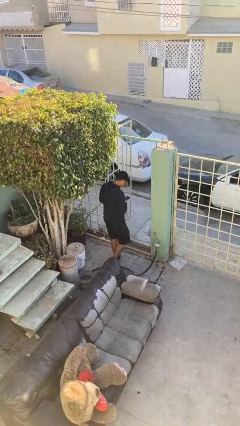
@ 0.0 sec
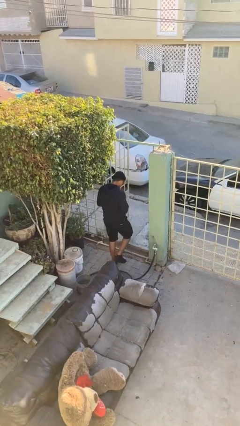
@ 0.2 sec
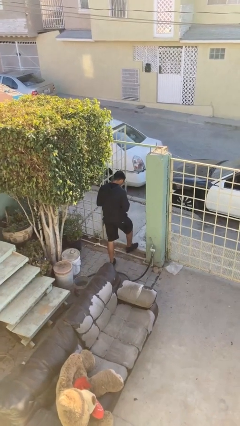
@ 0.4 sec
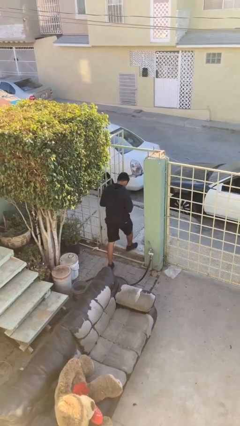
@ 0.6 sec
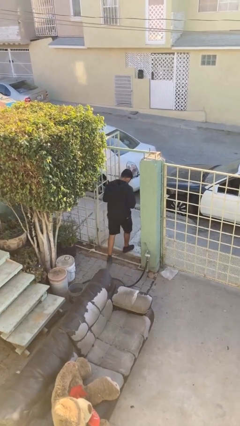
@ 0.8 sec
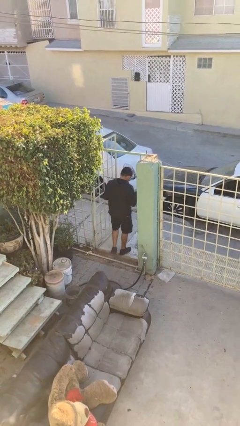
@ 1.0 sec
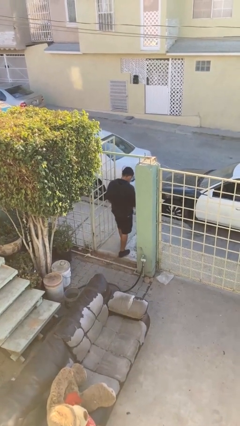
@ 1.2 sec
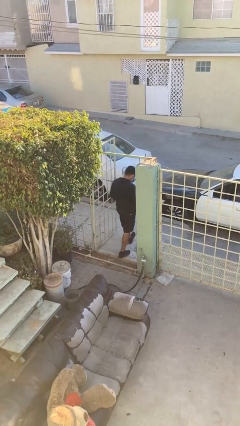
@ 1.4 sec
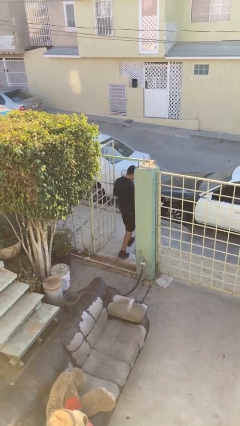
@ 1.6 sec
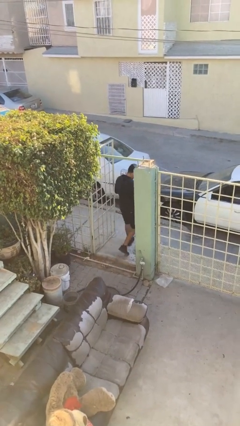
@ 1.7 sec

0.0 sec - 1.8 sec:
person exits scene through structure

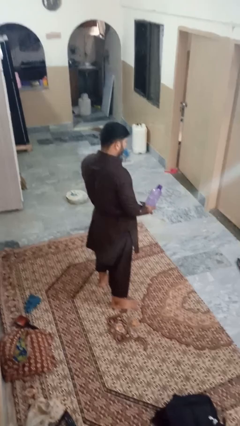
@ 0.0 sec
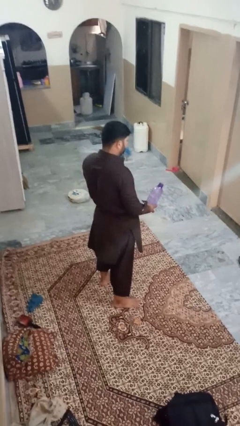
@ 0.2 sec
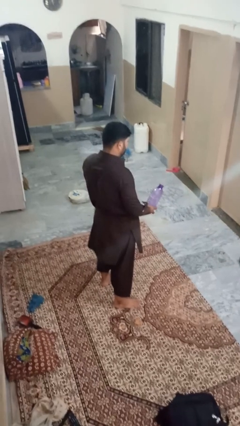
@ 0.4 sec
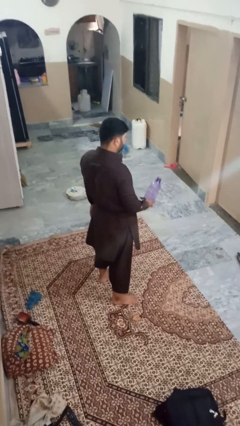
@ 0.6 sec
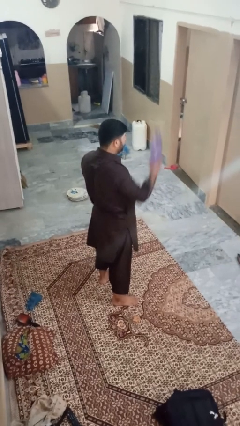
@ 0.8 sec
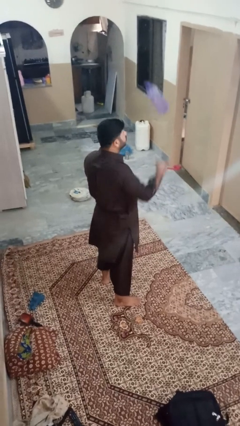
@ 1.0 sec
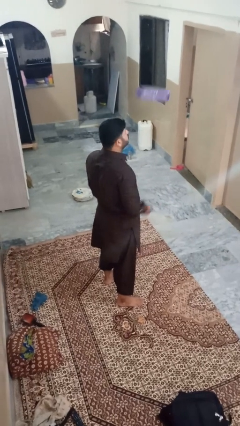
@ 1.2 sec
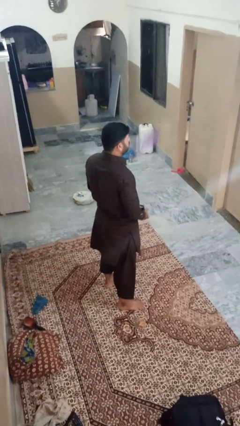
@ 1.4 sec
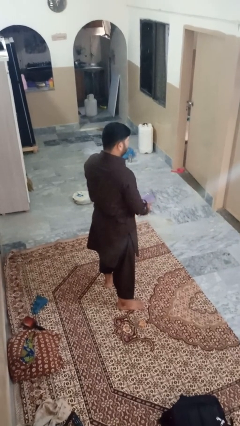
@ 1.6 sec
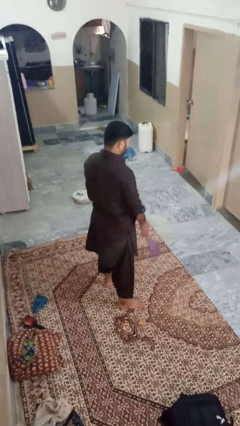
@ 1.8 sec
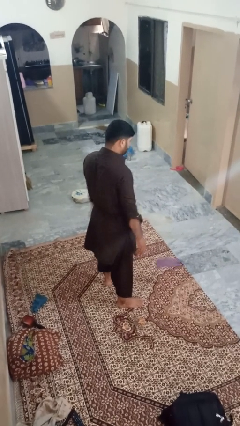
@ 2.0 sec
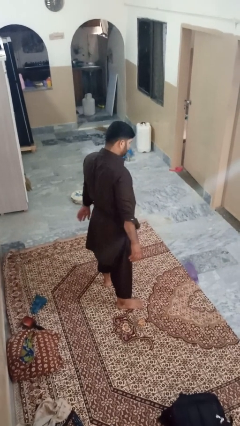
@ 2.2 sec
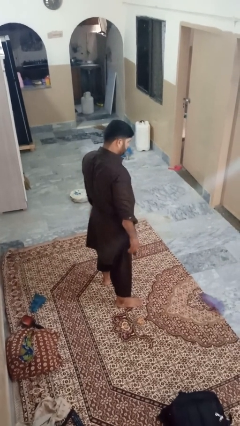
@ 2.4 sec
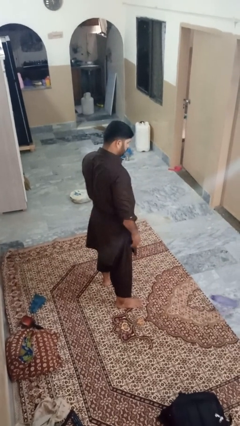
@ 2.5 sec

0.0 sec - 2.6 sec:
person throws object into air

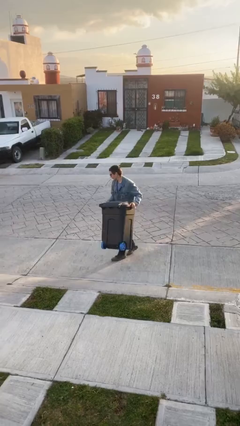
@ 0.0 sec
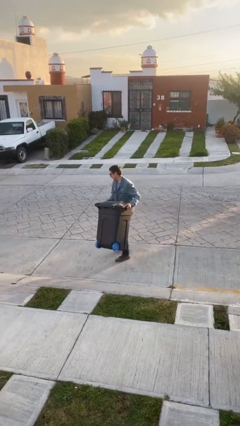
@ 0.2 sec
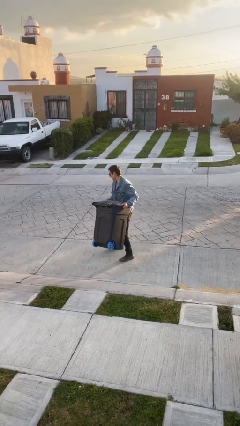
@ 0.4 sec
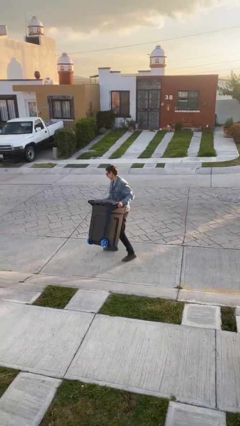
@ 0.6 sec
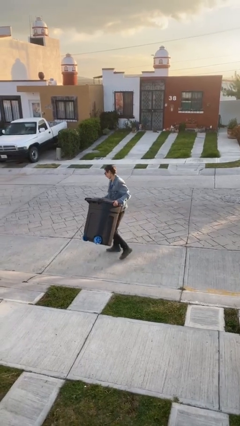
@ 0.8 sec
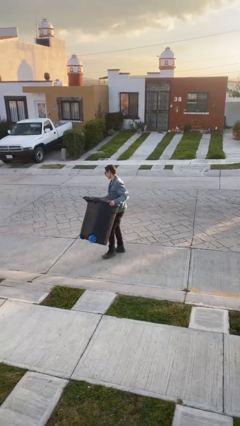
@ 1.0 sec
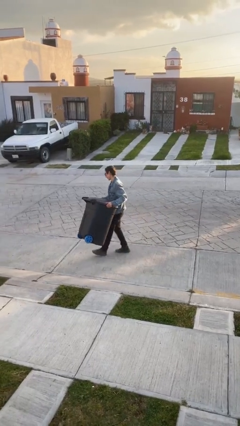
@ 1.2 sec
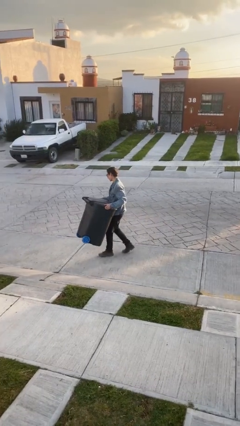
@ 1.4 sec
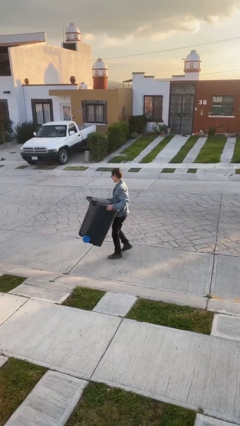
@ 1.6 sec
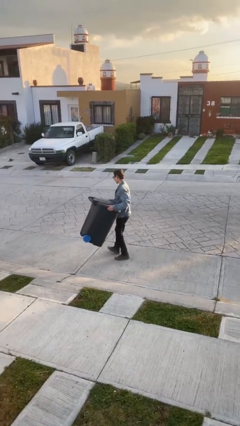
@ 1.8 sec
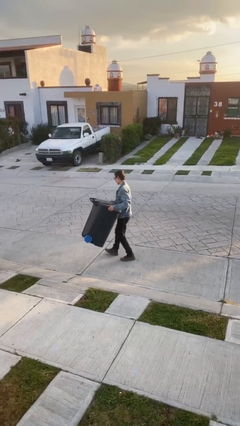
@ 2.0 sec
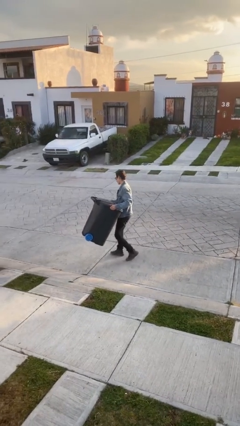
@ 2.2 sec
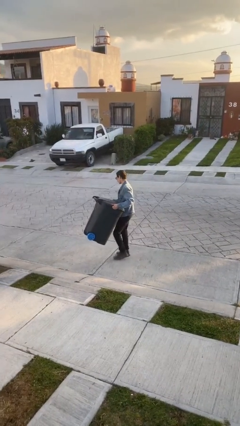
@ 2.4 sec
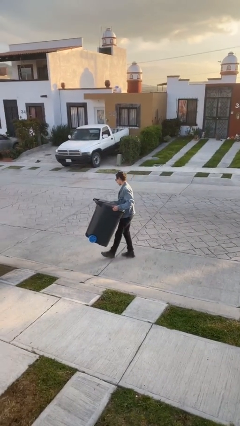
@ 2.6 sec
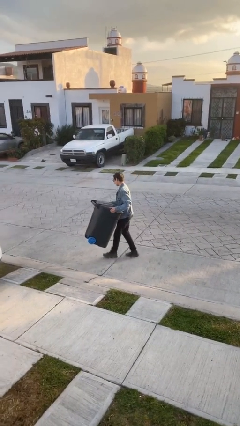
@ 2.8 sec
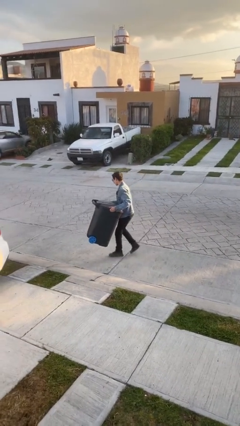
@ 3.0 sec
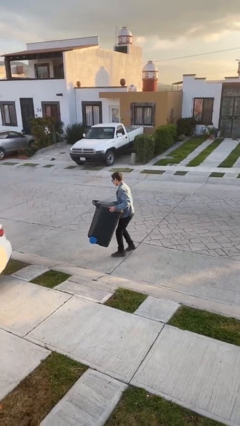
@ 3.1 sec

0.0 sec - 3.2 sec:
person carries heavy object

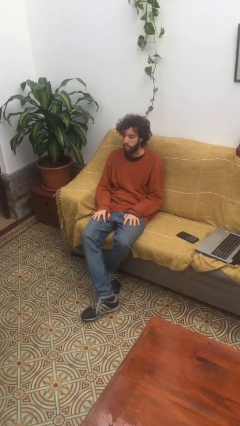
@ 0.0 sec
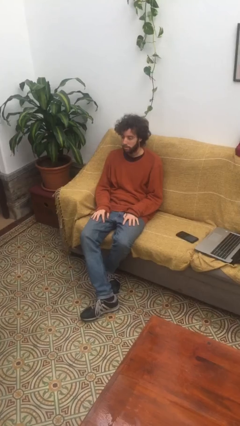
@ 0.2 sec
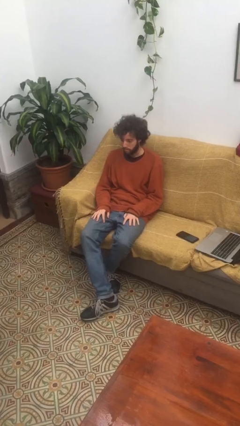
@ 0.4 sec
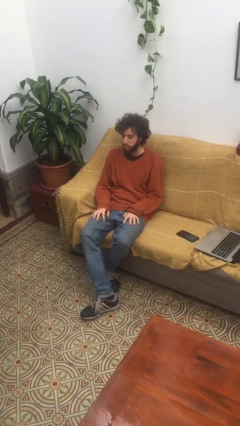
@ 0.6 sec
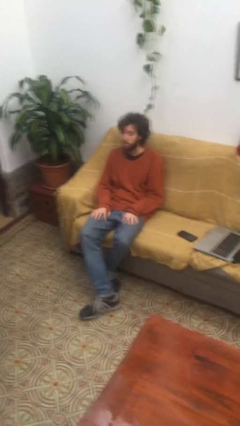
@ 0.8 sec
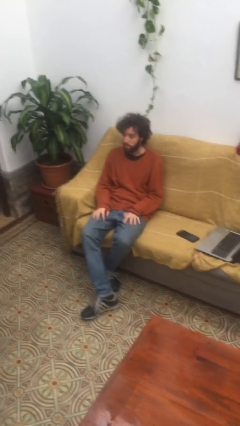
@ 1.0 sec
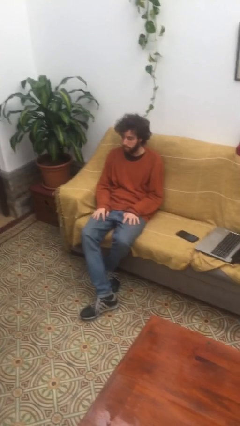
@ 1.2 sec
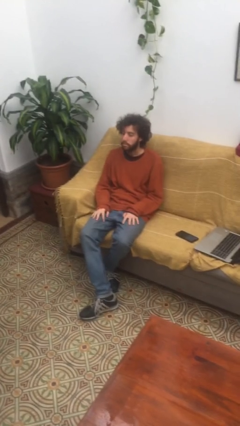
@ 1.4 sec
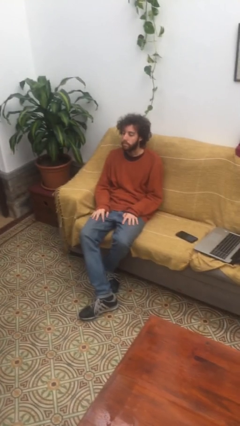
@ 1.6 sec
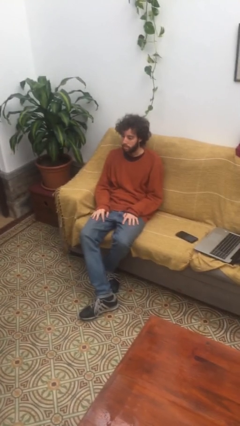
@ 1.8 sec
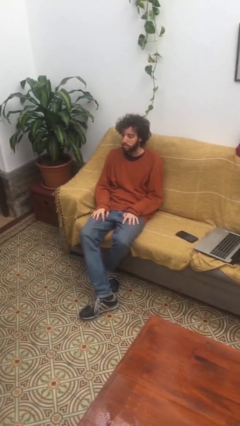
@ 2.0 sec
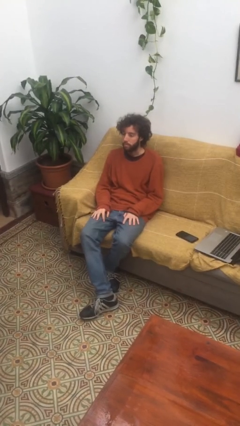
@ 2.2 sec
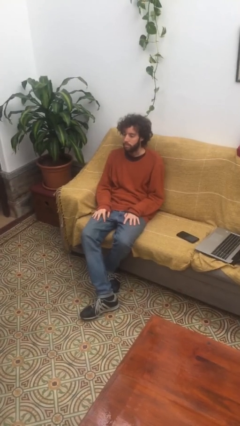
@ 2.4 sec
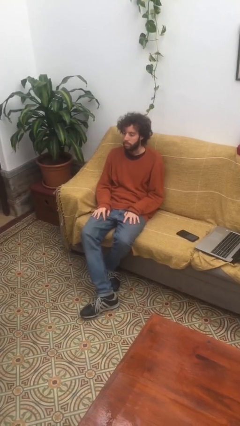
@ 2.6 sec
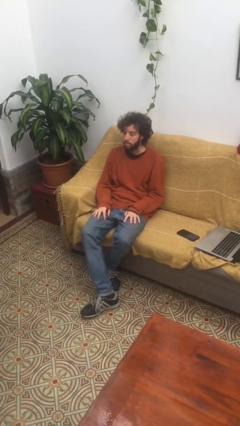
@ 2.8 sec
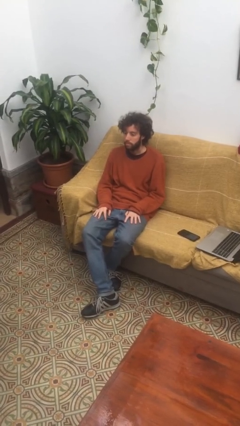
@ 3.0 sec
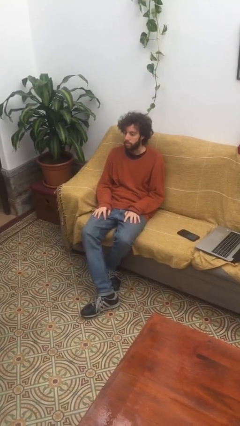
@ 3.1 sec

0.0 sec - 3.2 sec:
person nods head

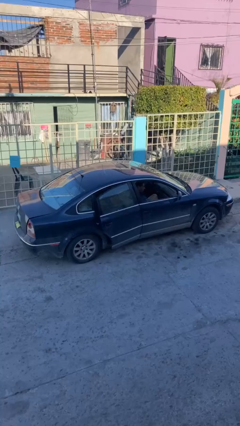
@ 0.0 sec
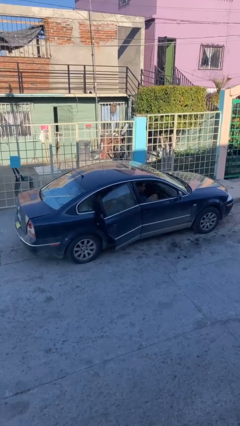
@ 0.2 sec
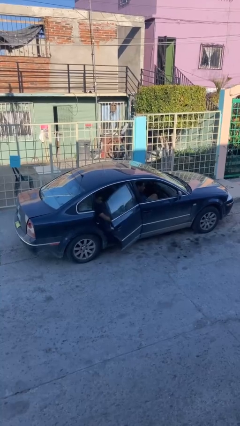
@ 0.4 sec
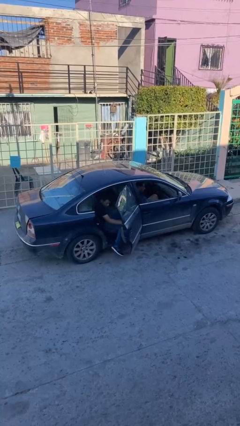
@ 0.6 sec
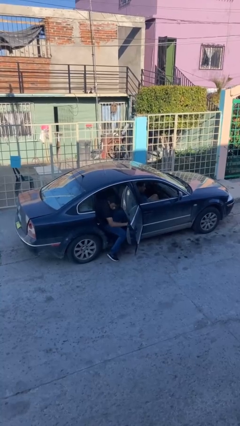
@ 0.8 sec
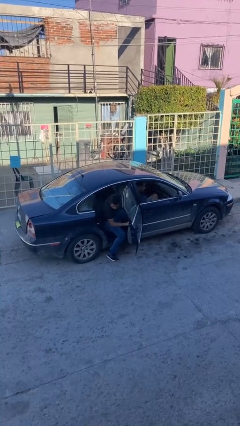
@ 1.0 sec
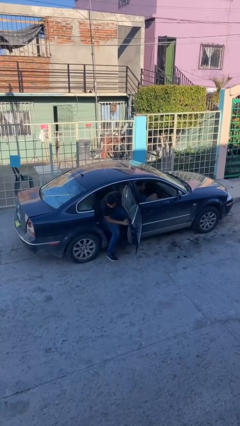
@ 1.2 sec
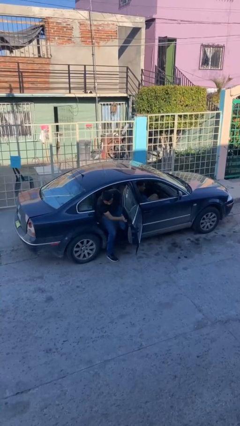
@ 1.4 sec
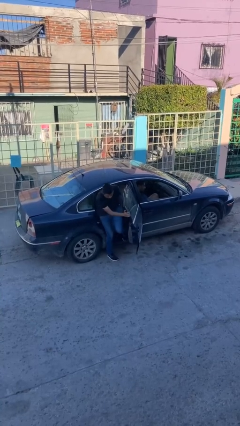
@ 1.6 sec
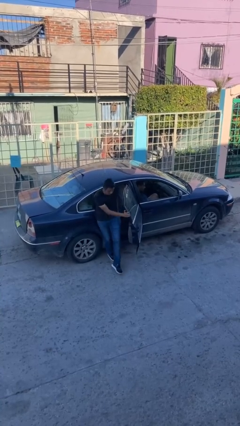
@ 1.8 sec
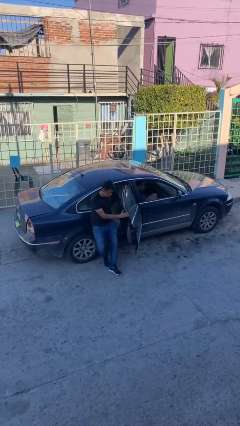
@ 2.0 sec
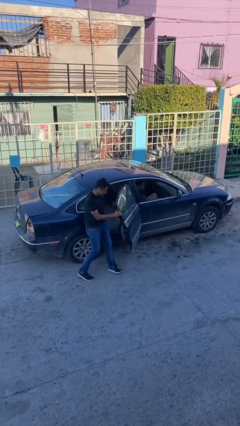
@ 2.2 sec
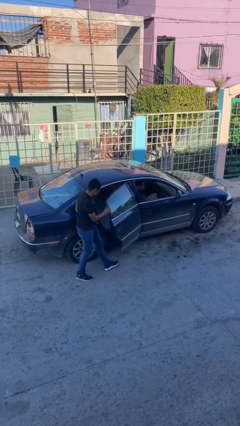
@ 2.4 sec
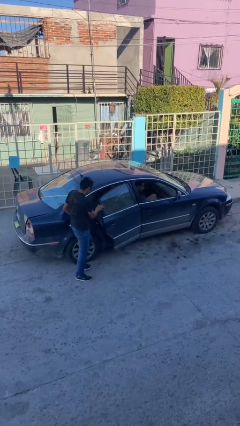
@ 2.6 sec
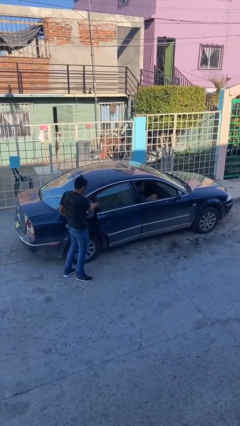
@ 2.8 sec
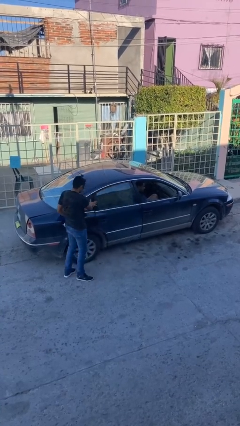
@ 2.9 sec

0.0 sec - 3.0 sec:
car drops off person

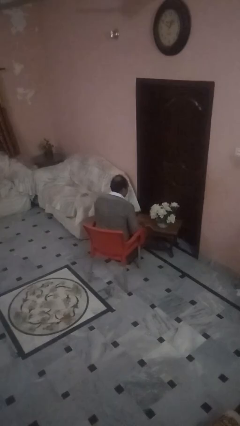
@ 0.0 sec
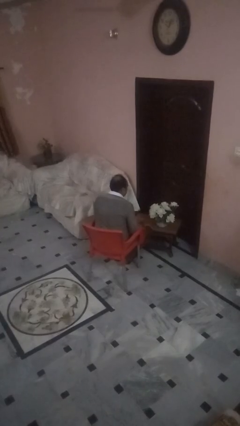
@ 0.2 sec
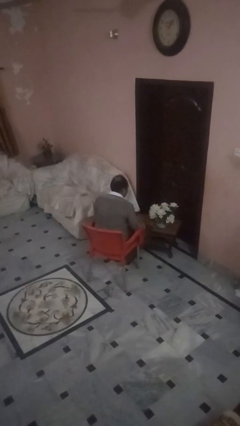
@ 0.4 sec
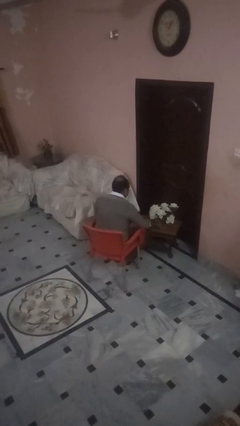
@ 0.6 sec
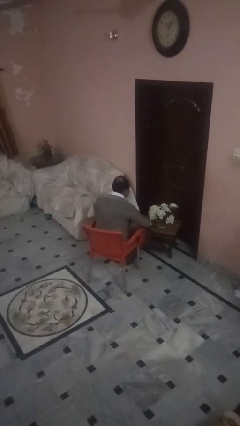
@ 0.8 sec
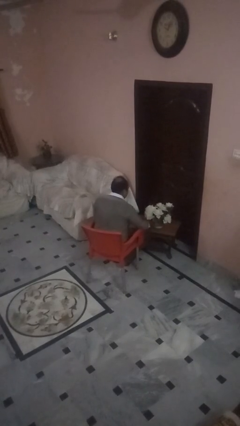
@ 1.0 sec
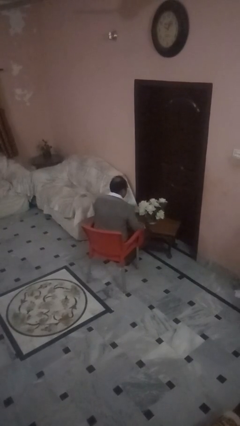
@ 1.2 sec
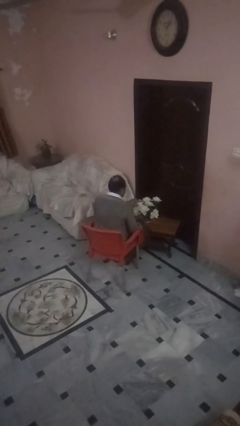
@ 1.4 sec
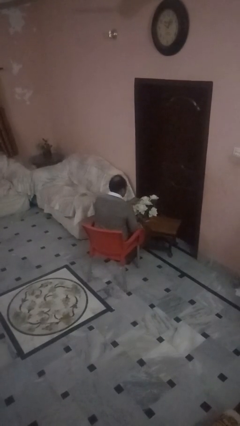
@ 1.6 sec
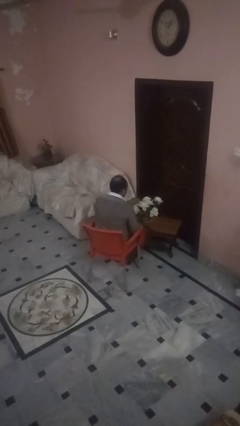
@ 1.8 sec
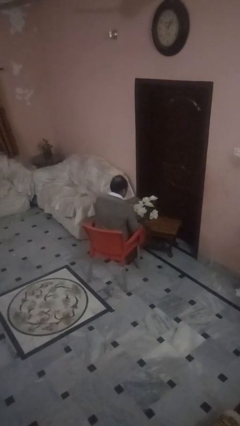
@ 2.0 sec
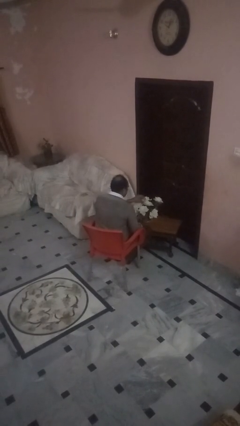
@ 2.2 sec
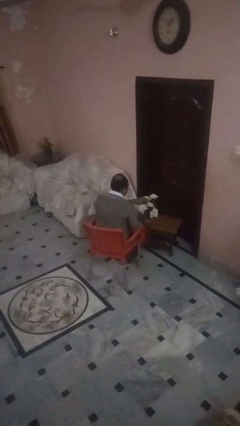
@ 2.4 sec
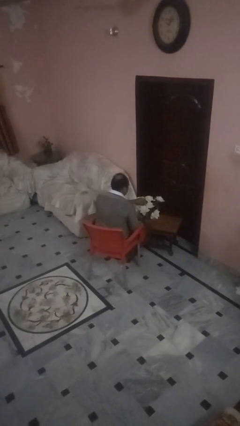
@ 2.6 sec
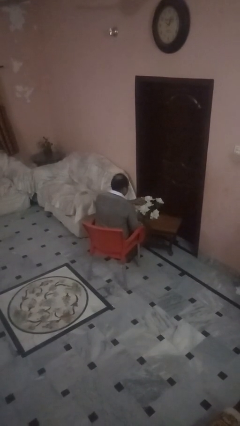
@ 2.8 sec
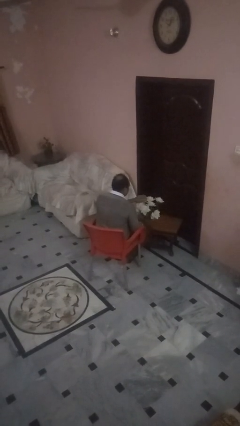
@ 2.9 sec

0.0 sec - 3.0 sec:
person arranges flowers in vase

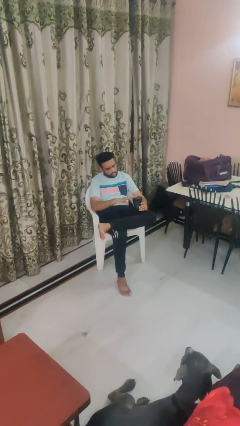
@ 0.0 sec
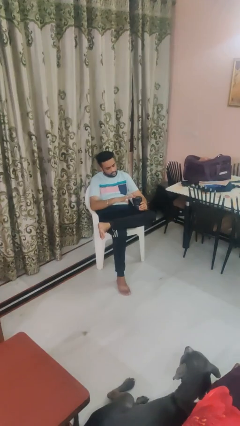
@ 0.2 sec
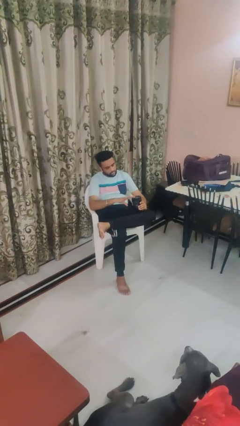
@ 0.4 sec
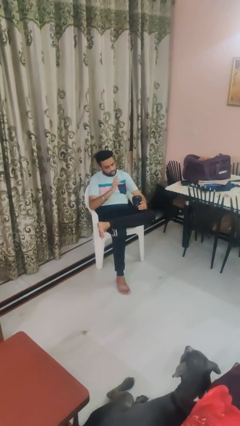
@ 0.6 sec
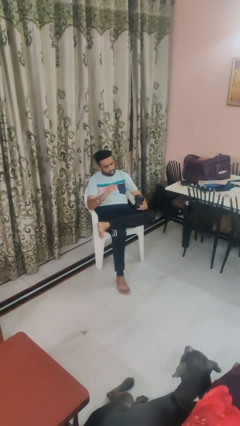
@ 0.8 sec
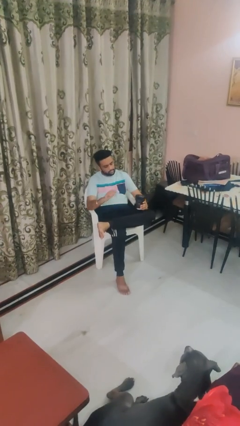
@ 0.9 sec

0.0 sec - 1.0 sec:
person taps object with finger
